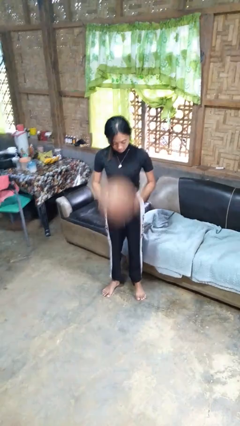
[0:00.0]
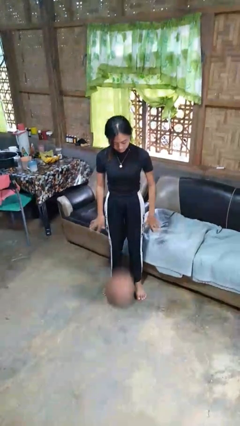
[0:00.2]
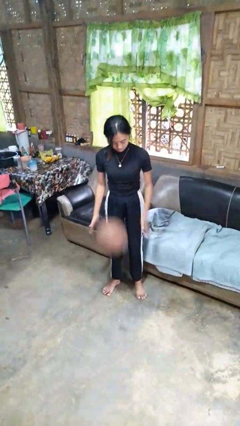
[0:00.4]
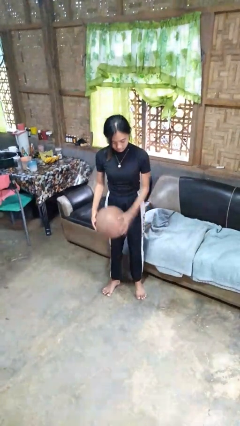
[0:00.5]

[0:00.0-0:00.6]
person bounces ball on floor

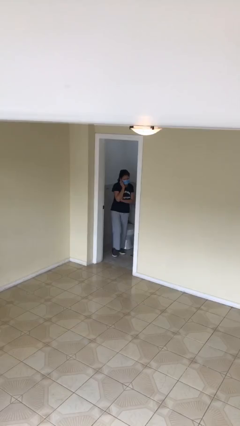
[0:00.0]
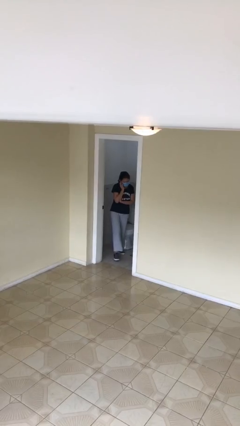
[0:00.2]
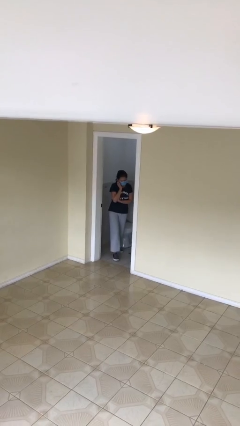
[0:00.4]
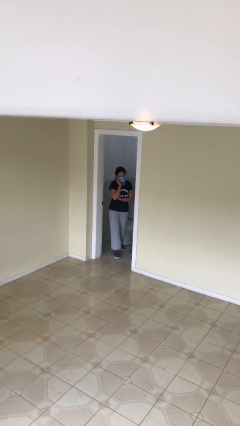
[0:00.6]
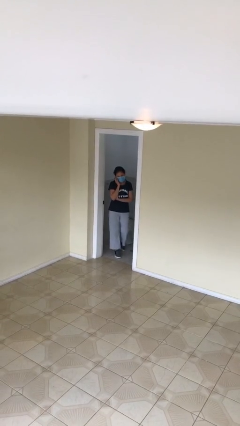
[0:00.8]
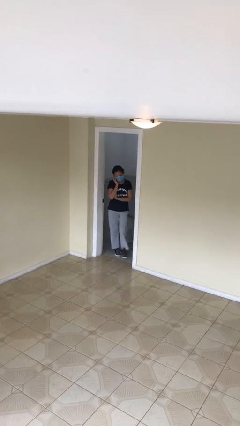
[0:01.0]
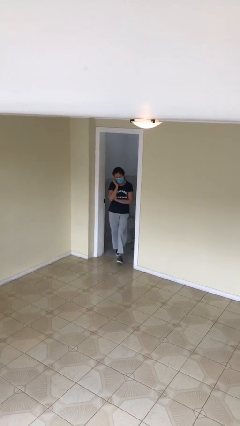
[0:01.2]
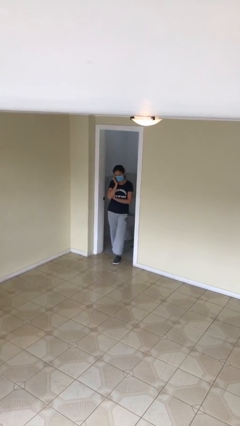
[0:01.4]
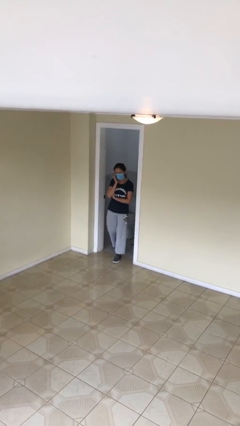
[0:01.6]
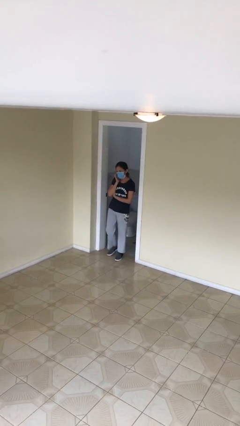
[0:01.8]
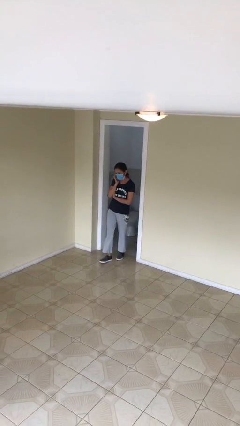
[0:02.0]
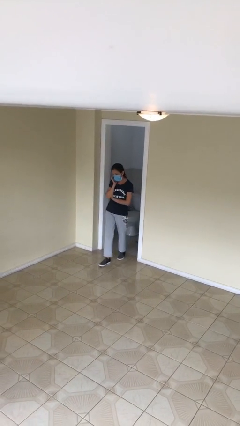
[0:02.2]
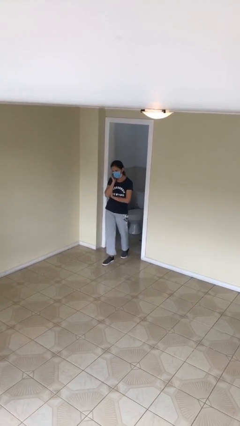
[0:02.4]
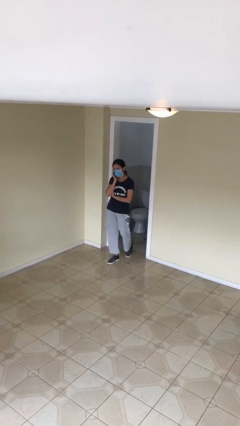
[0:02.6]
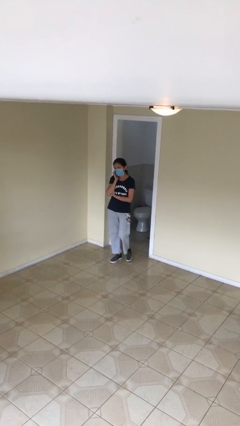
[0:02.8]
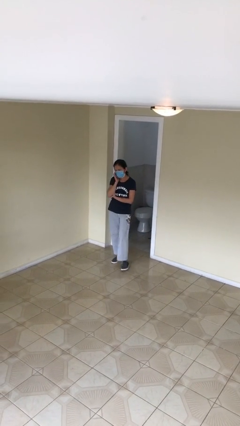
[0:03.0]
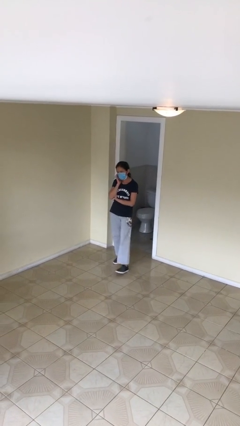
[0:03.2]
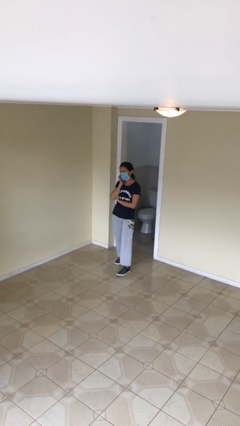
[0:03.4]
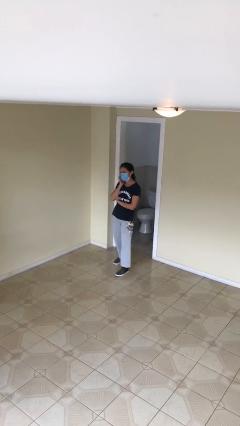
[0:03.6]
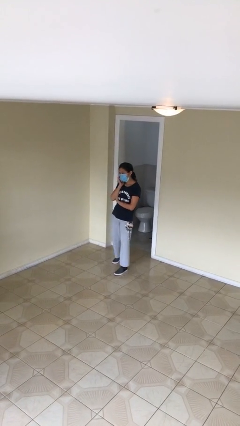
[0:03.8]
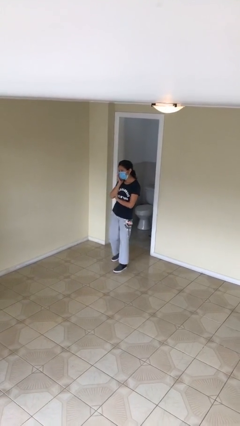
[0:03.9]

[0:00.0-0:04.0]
person enters scene through structure

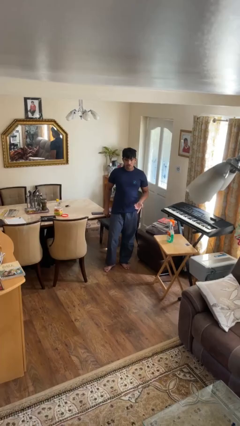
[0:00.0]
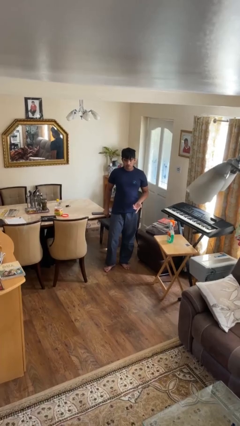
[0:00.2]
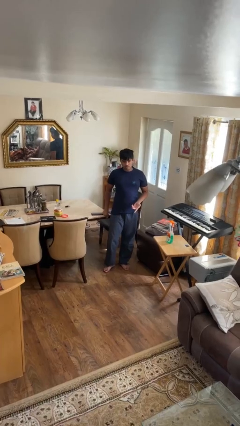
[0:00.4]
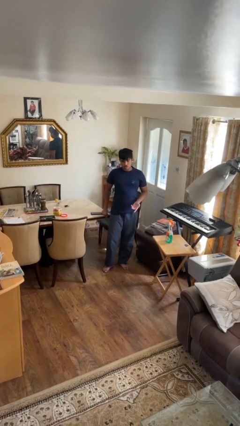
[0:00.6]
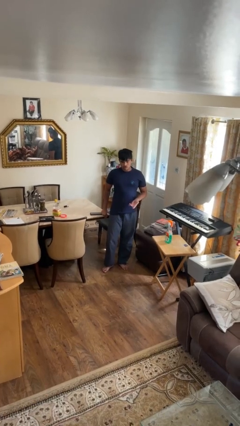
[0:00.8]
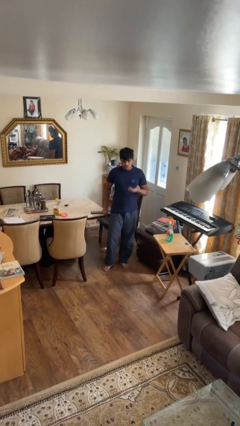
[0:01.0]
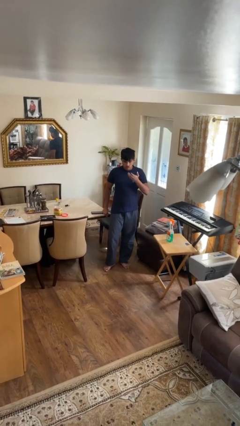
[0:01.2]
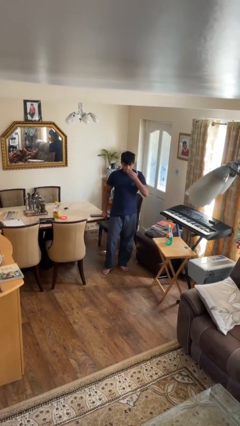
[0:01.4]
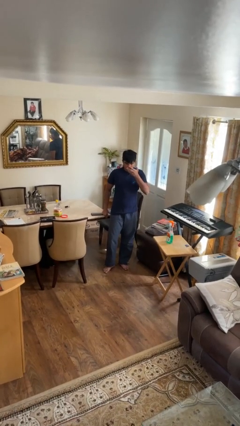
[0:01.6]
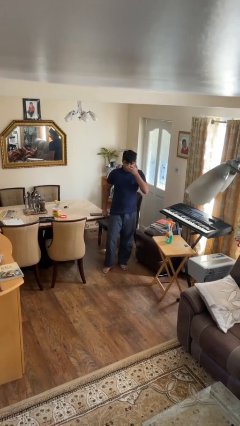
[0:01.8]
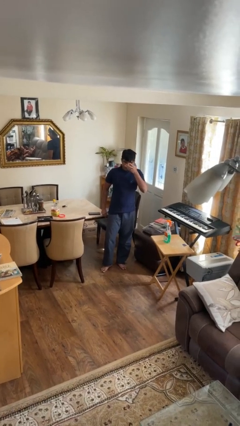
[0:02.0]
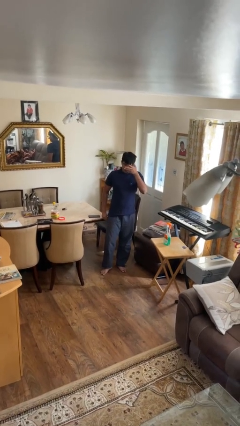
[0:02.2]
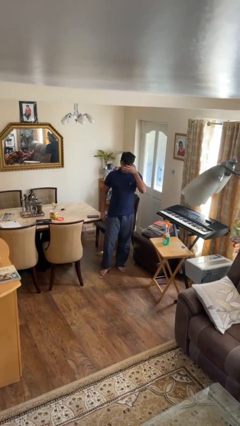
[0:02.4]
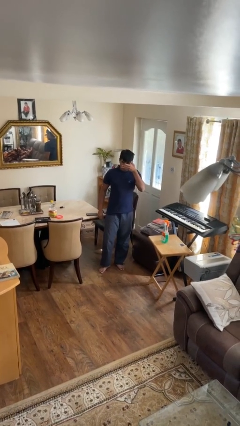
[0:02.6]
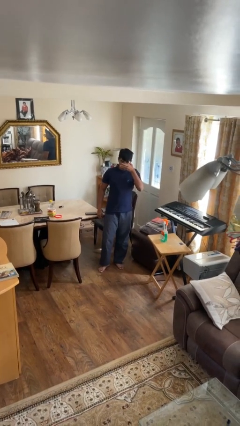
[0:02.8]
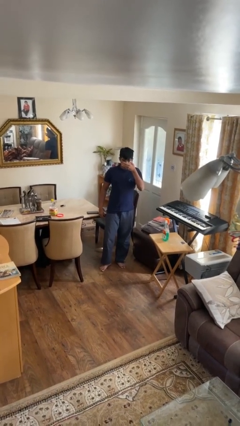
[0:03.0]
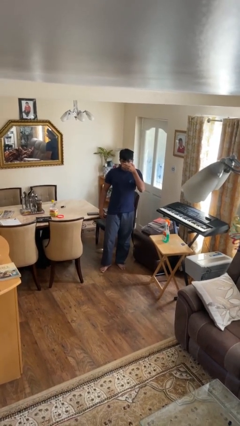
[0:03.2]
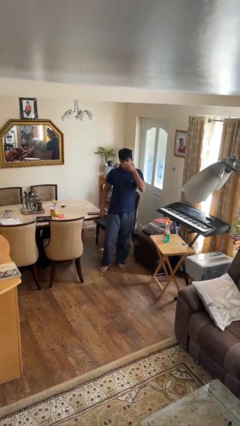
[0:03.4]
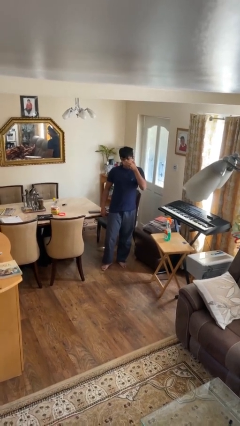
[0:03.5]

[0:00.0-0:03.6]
person licks fingers

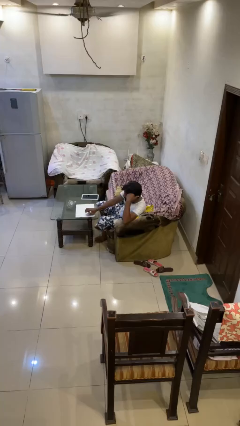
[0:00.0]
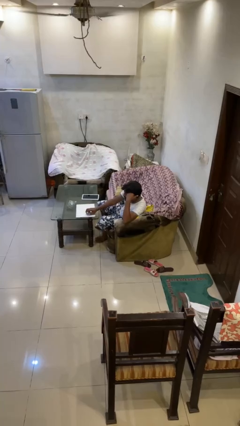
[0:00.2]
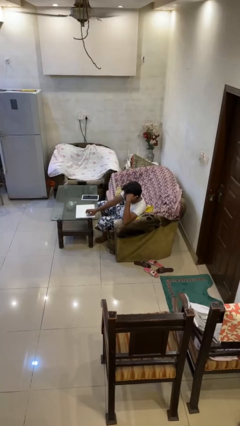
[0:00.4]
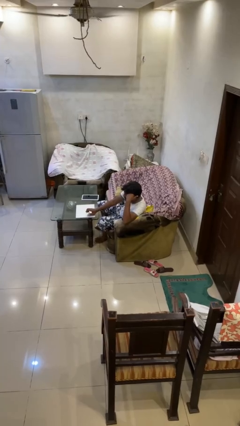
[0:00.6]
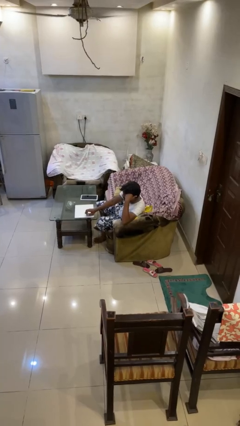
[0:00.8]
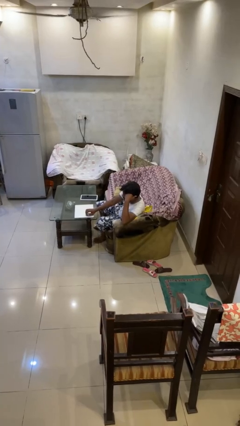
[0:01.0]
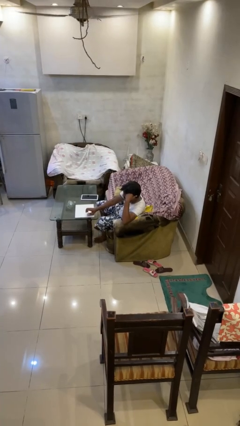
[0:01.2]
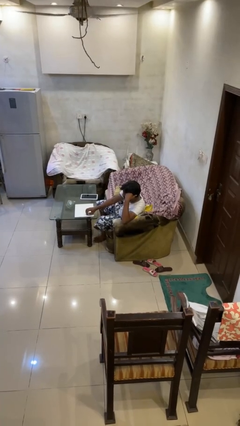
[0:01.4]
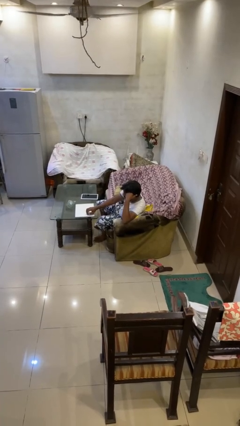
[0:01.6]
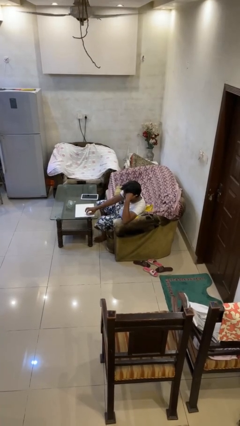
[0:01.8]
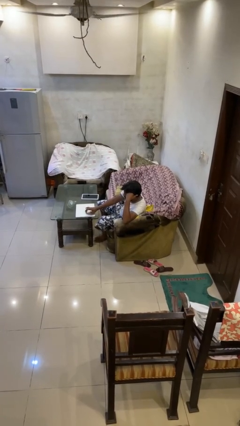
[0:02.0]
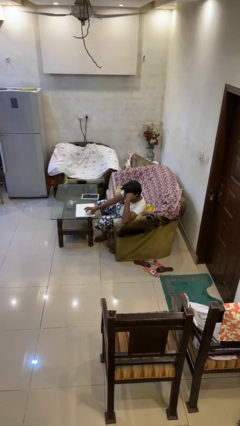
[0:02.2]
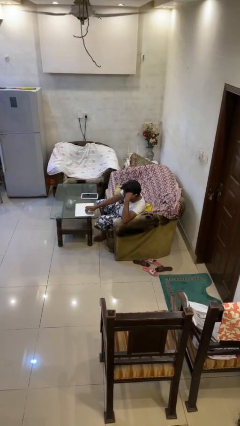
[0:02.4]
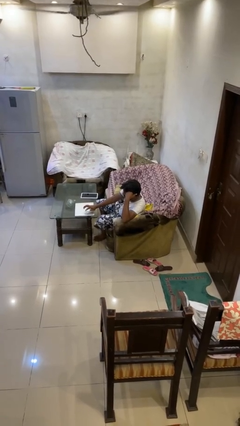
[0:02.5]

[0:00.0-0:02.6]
person taps object with finger

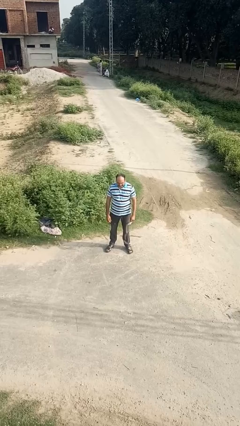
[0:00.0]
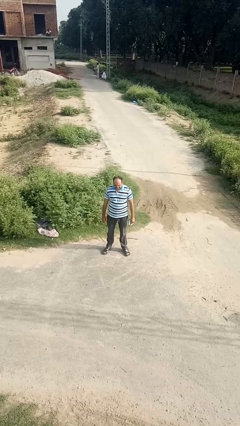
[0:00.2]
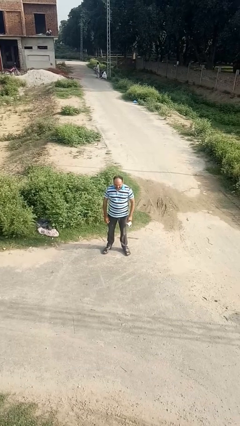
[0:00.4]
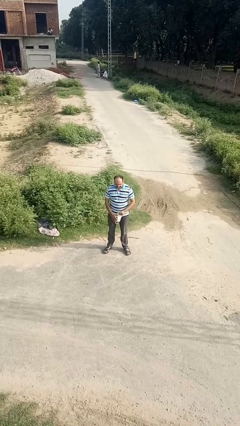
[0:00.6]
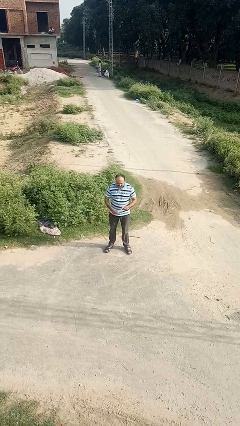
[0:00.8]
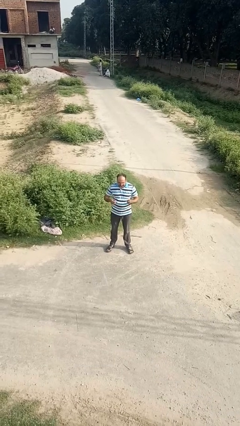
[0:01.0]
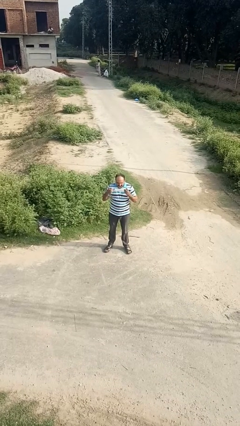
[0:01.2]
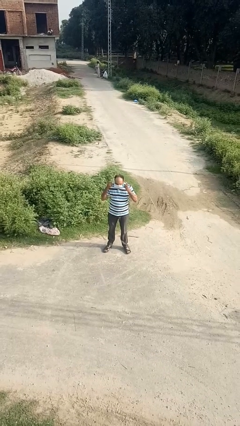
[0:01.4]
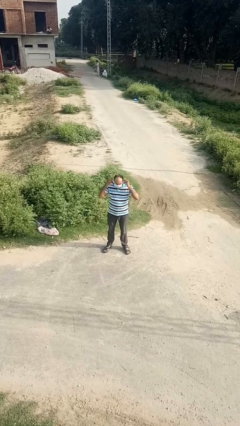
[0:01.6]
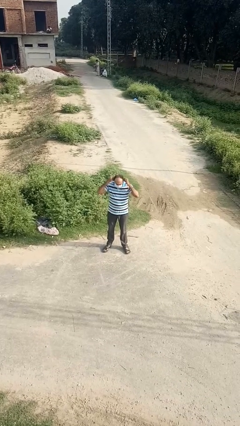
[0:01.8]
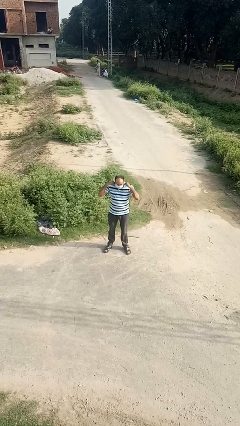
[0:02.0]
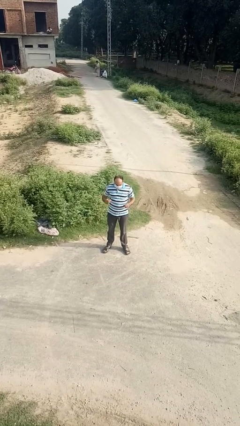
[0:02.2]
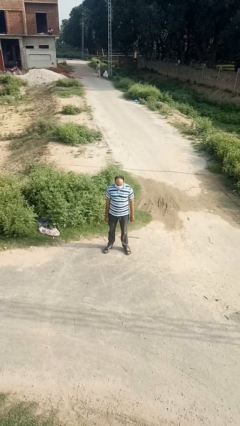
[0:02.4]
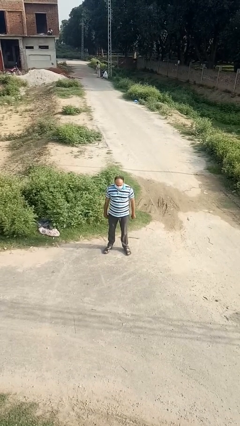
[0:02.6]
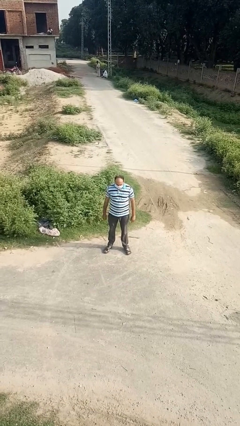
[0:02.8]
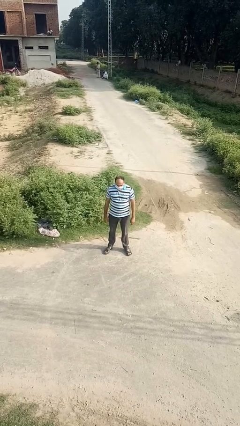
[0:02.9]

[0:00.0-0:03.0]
person puts on facemask

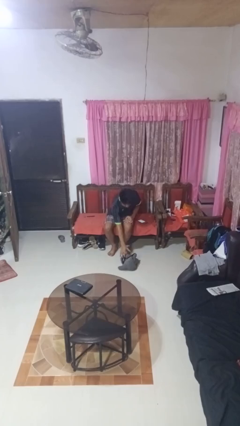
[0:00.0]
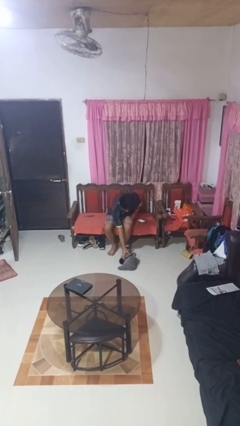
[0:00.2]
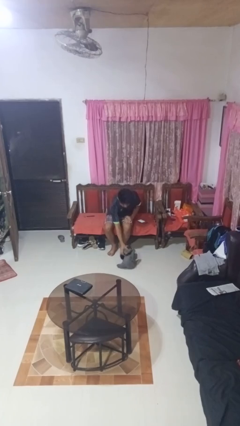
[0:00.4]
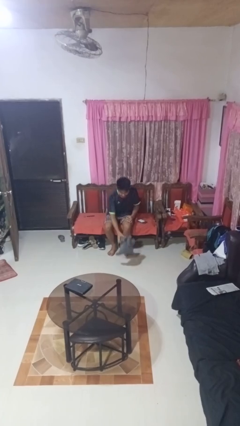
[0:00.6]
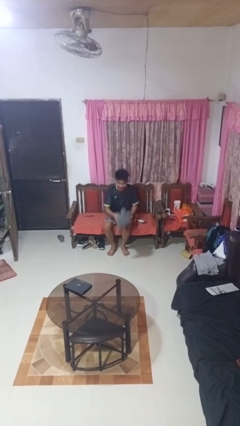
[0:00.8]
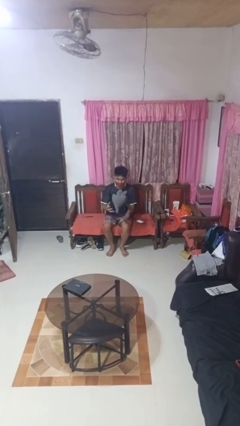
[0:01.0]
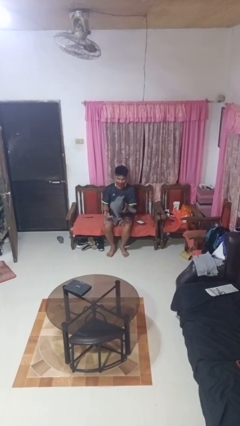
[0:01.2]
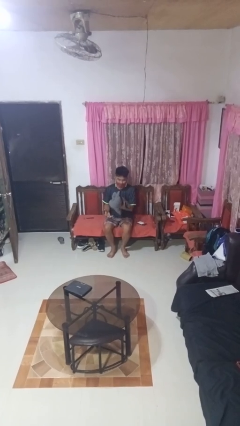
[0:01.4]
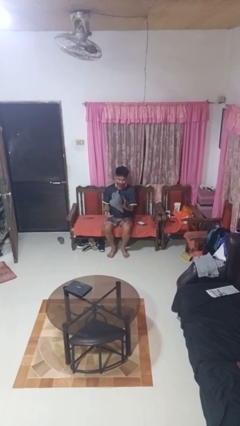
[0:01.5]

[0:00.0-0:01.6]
person picks up object from floor

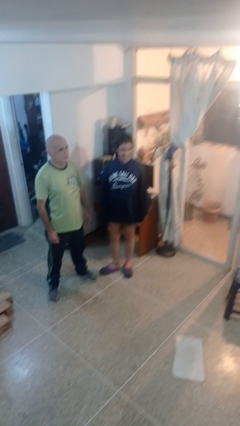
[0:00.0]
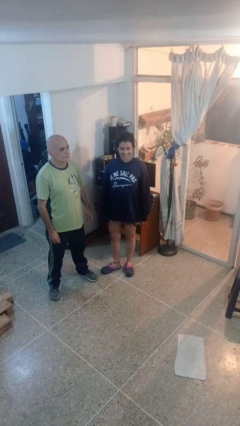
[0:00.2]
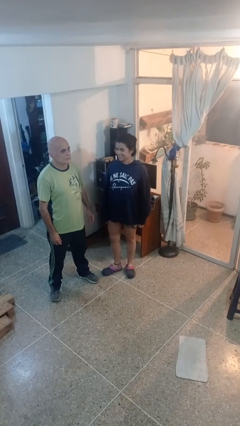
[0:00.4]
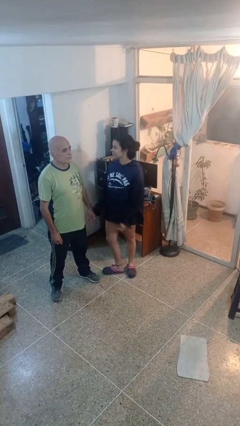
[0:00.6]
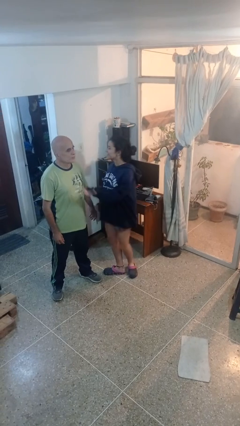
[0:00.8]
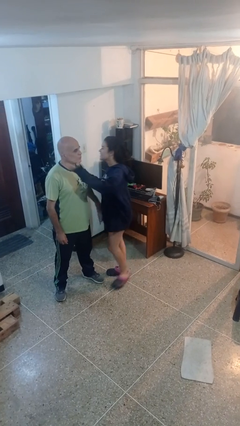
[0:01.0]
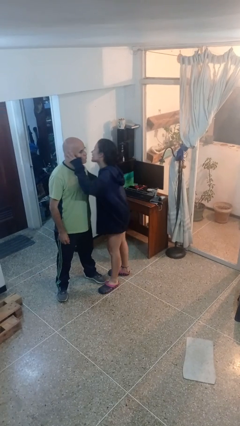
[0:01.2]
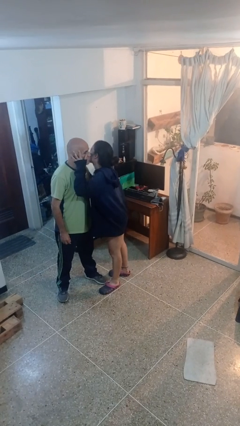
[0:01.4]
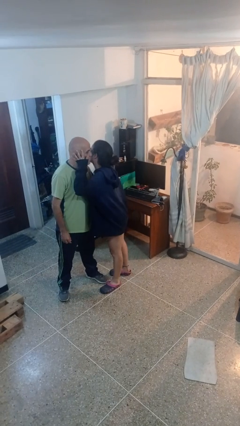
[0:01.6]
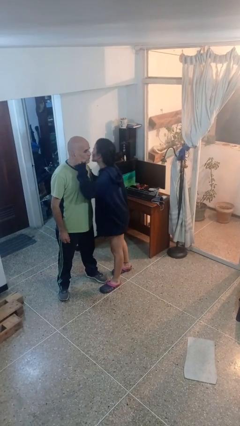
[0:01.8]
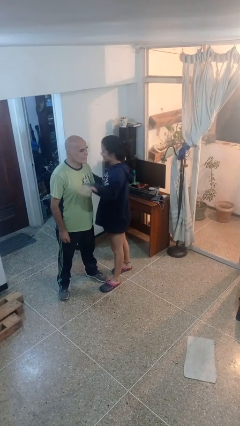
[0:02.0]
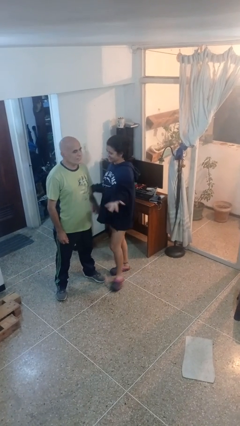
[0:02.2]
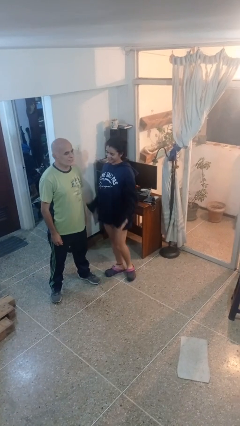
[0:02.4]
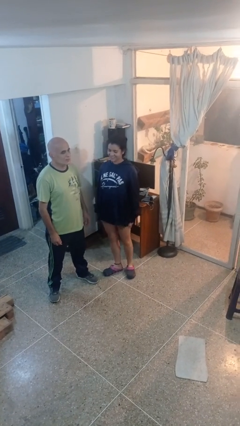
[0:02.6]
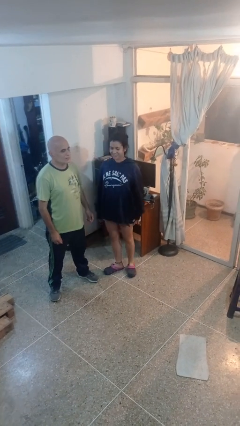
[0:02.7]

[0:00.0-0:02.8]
person kisses cheek of person
